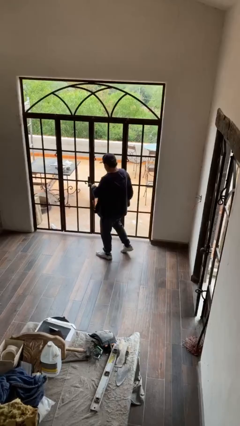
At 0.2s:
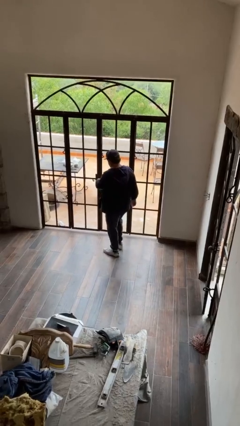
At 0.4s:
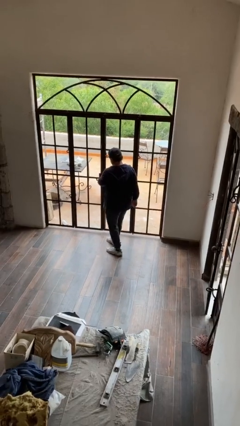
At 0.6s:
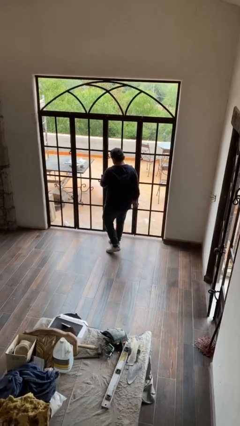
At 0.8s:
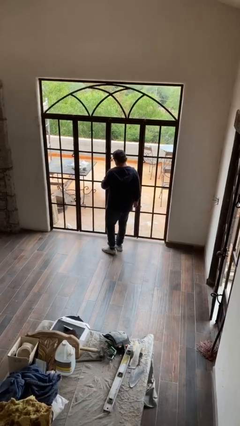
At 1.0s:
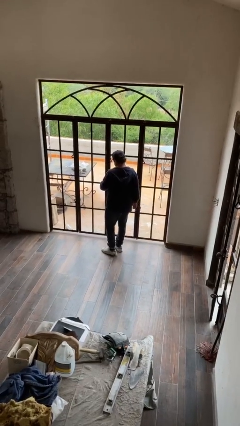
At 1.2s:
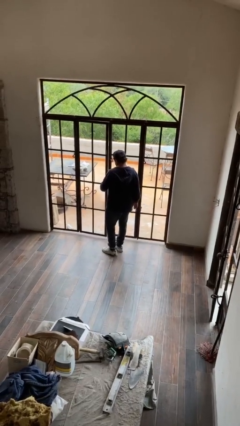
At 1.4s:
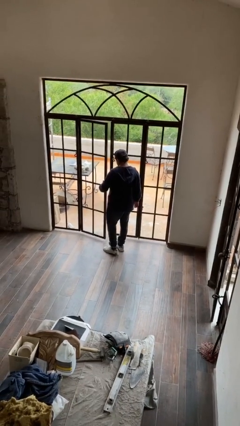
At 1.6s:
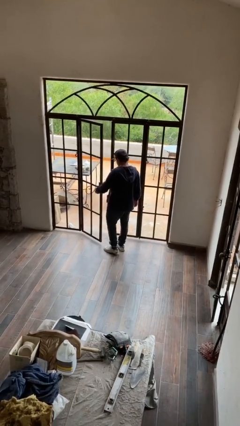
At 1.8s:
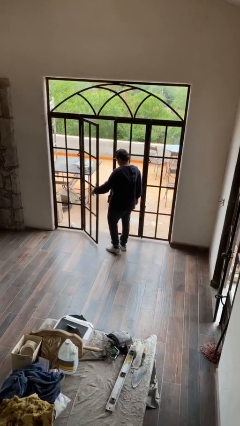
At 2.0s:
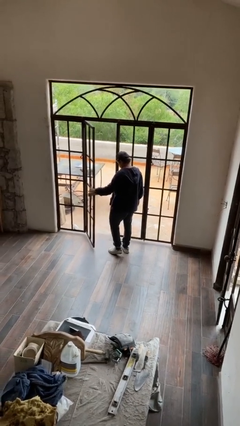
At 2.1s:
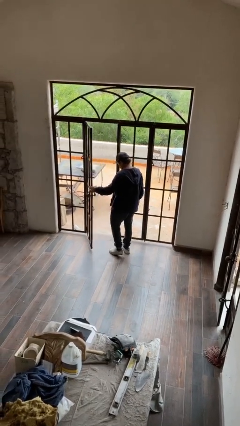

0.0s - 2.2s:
person opens facility door

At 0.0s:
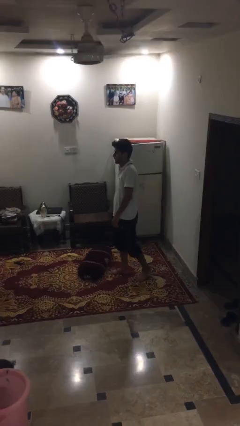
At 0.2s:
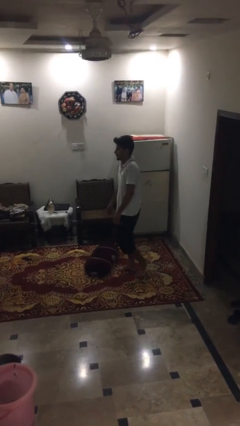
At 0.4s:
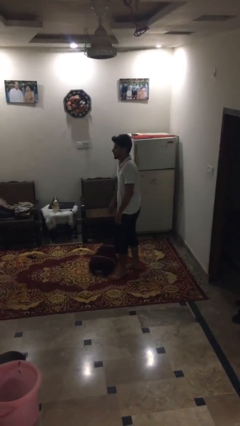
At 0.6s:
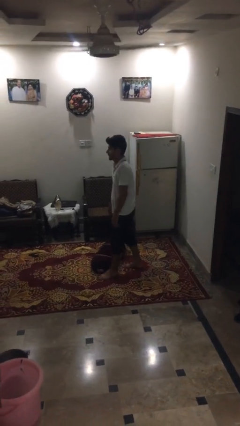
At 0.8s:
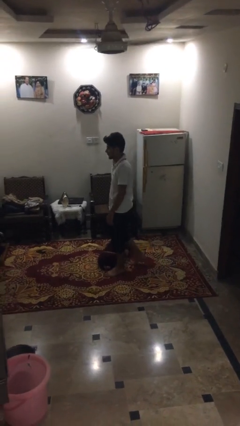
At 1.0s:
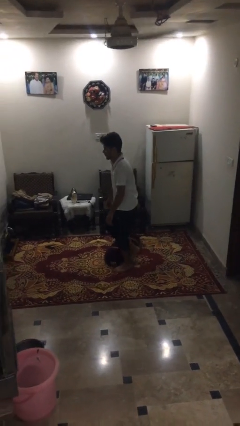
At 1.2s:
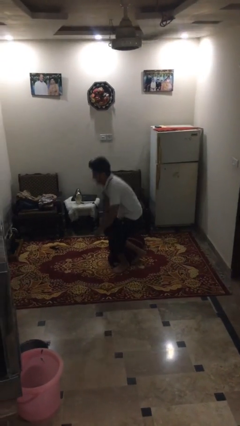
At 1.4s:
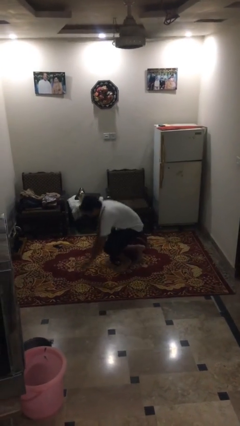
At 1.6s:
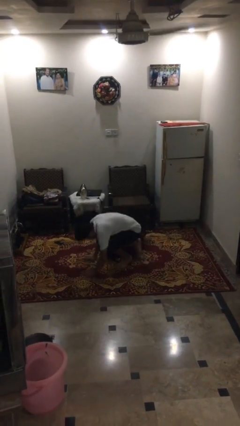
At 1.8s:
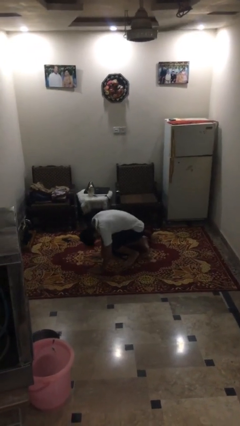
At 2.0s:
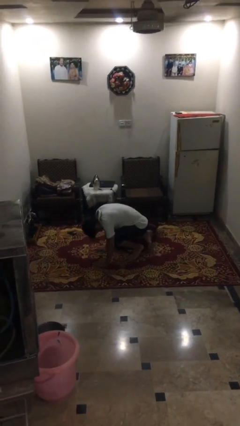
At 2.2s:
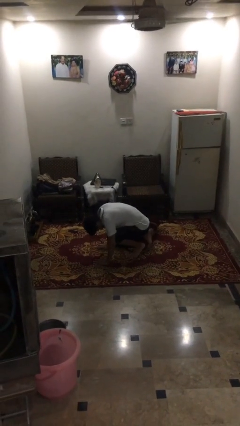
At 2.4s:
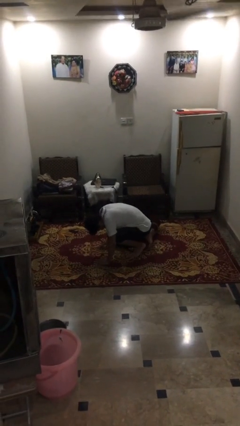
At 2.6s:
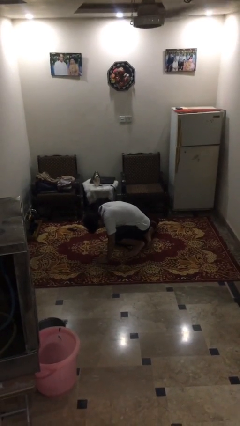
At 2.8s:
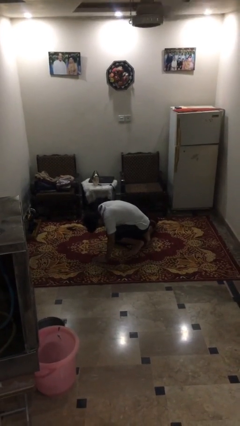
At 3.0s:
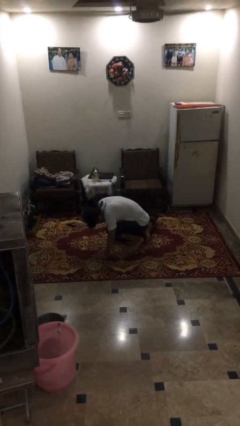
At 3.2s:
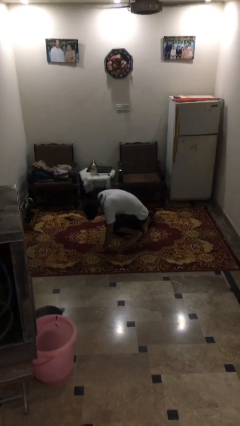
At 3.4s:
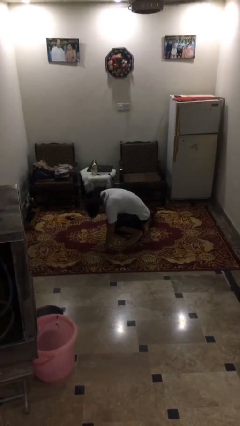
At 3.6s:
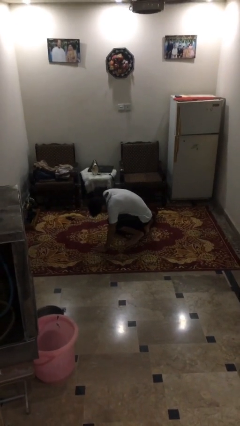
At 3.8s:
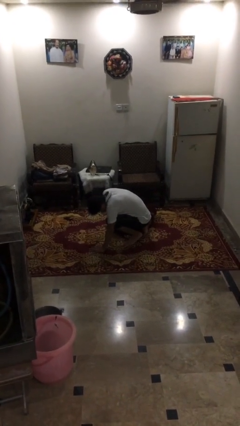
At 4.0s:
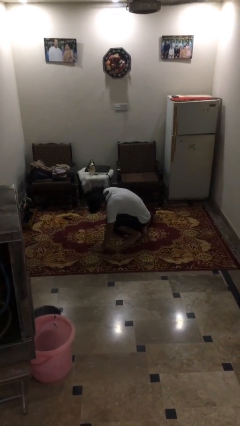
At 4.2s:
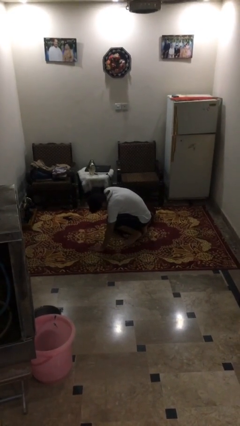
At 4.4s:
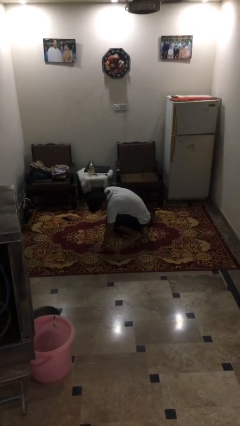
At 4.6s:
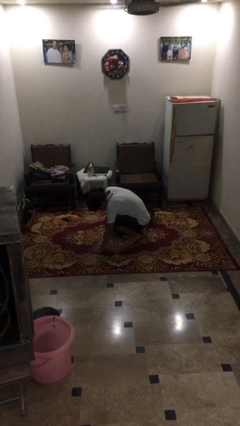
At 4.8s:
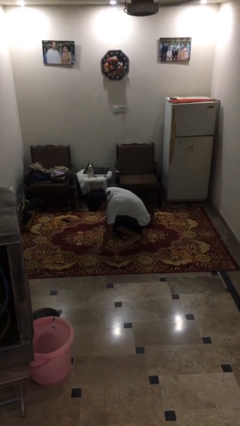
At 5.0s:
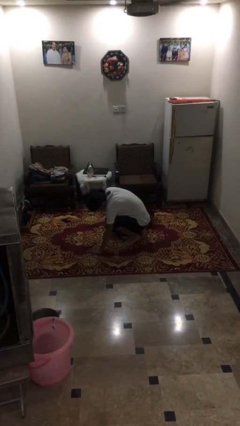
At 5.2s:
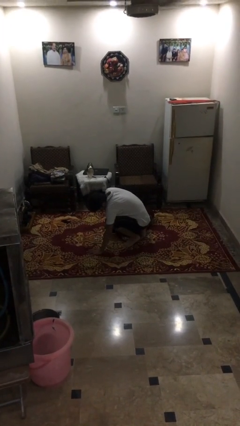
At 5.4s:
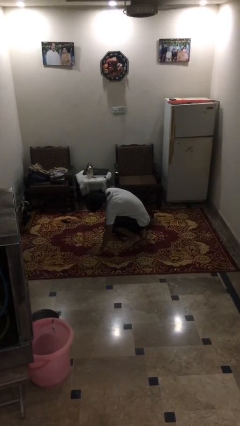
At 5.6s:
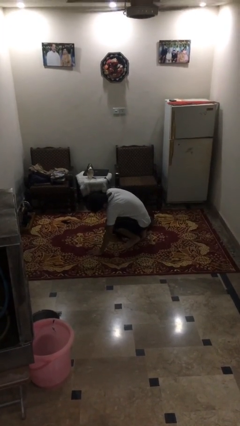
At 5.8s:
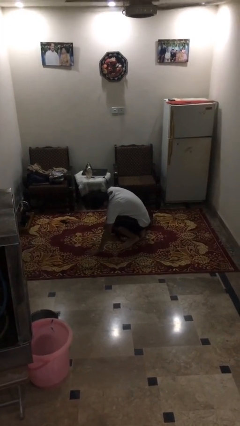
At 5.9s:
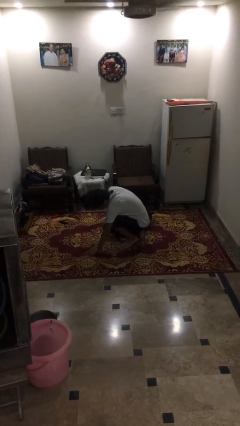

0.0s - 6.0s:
person trips on object on floor

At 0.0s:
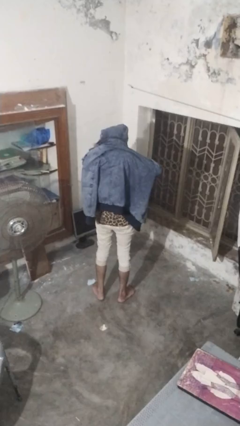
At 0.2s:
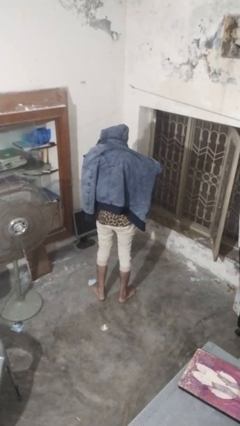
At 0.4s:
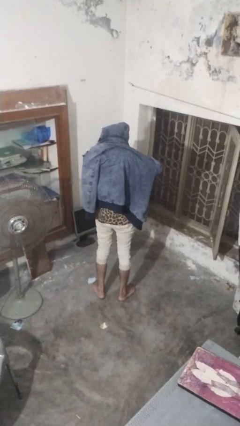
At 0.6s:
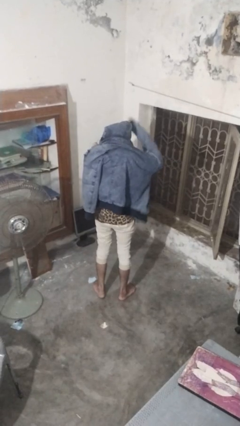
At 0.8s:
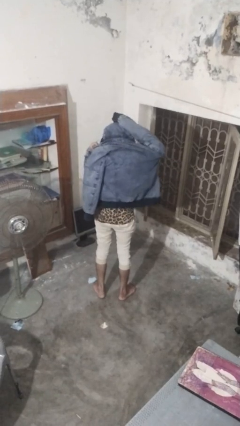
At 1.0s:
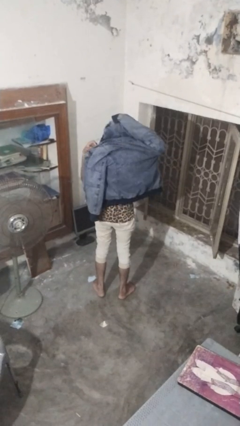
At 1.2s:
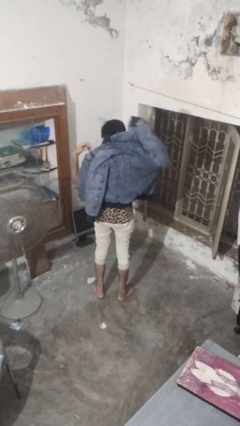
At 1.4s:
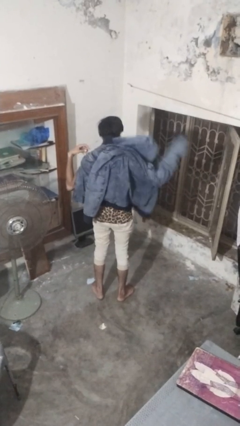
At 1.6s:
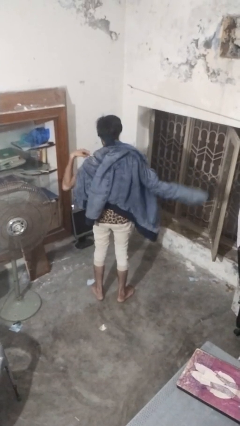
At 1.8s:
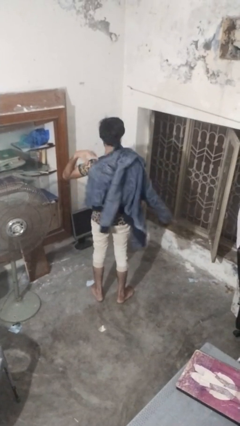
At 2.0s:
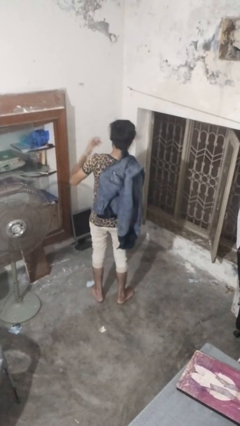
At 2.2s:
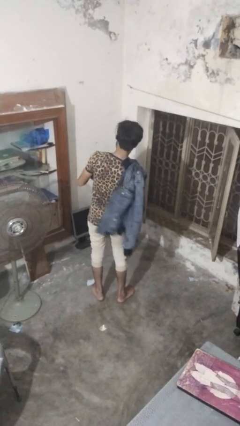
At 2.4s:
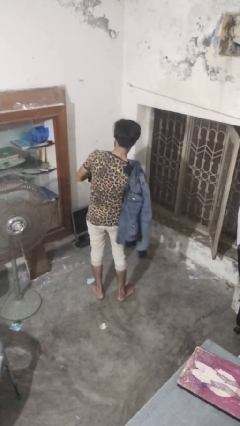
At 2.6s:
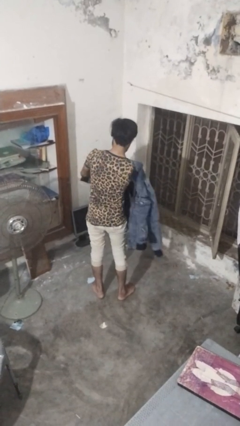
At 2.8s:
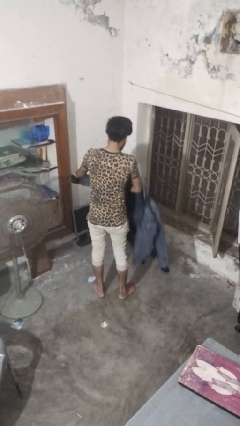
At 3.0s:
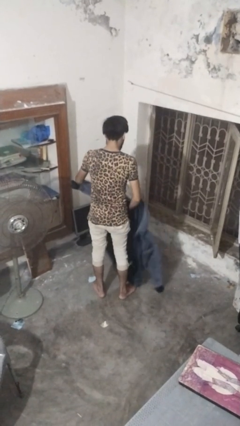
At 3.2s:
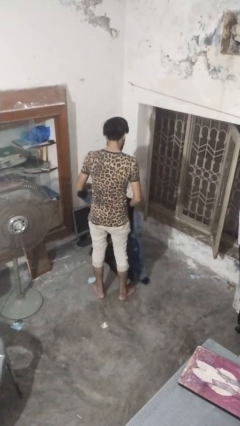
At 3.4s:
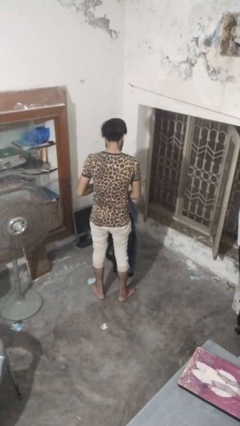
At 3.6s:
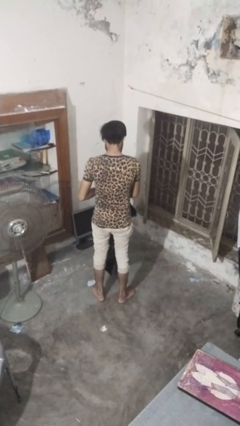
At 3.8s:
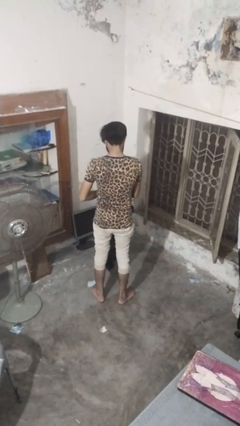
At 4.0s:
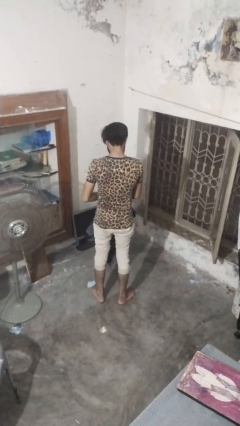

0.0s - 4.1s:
person takes off hoodie

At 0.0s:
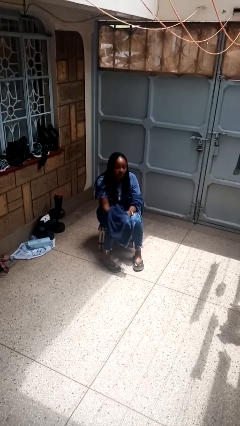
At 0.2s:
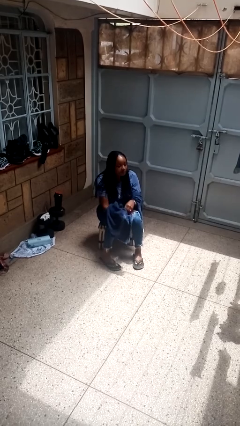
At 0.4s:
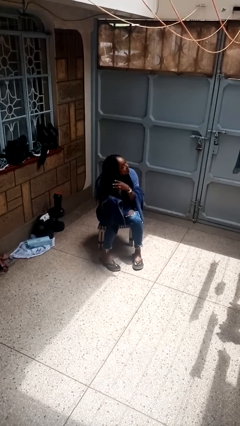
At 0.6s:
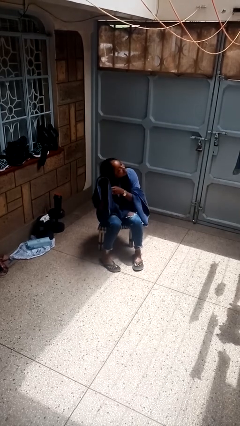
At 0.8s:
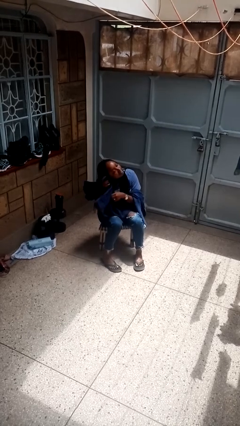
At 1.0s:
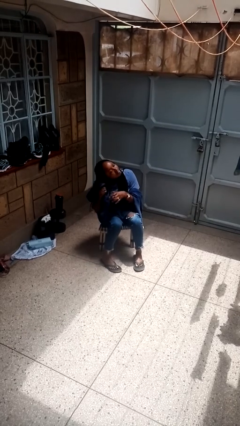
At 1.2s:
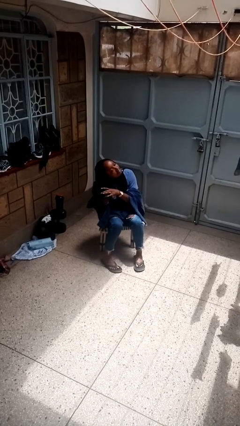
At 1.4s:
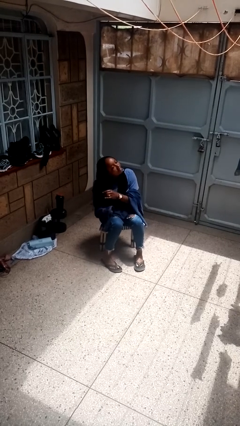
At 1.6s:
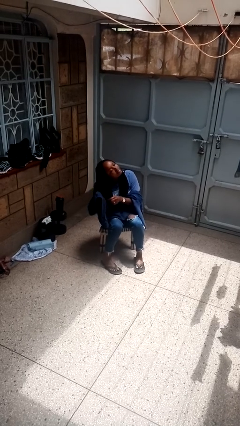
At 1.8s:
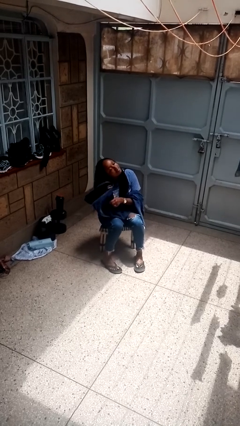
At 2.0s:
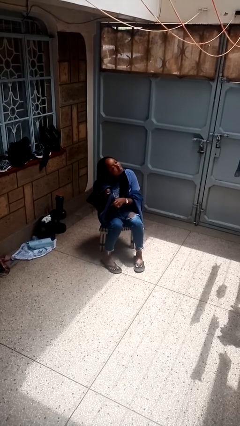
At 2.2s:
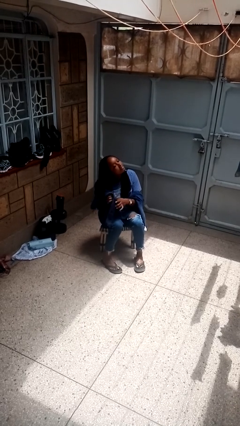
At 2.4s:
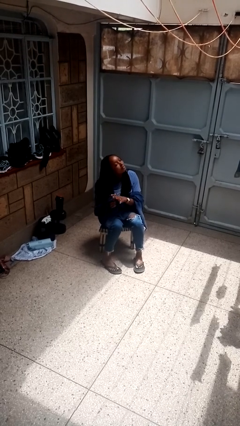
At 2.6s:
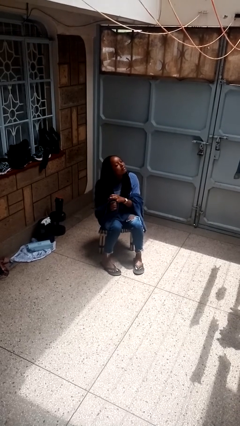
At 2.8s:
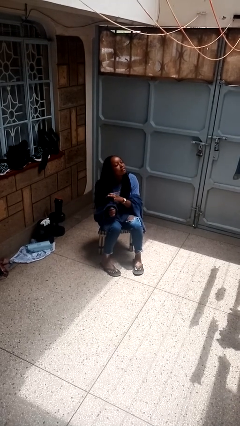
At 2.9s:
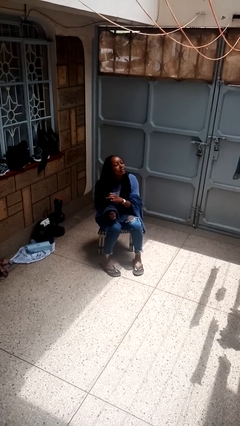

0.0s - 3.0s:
person dries hair with towel

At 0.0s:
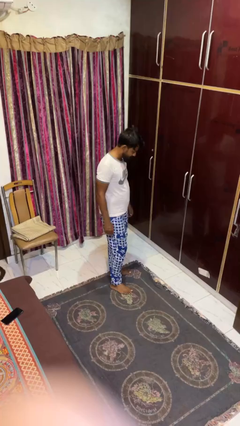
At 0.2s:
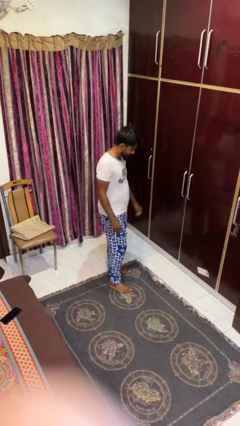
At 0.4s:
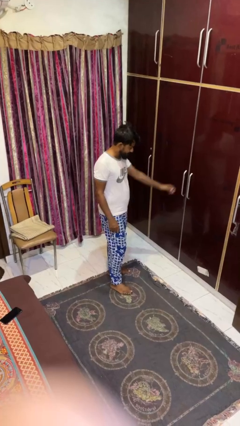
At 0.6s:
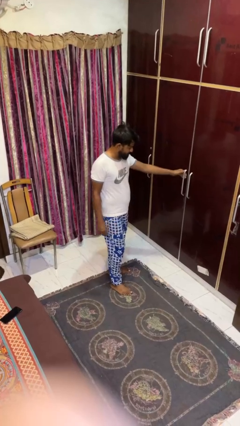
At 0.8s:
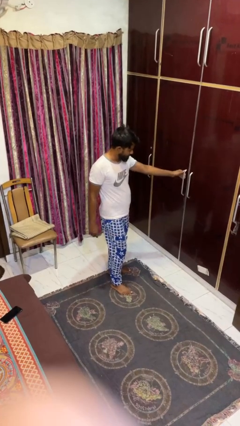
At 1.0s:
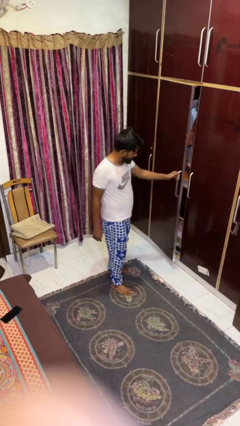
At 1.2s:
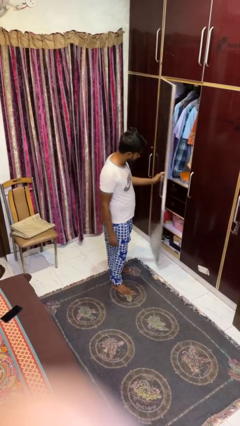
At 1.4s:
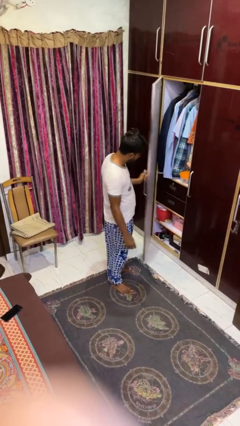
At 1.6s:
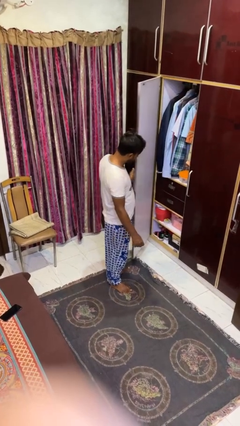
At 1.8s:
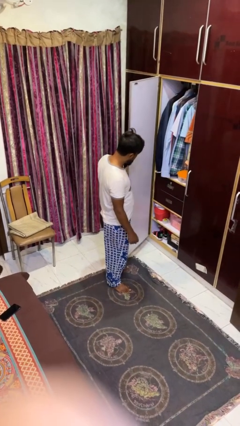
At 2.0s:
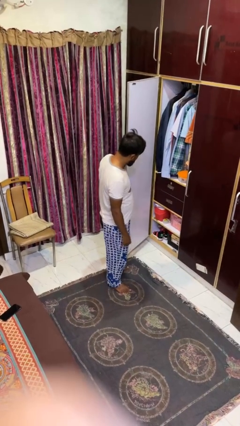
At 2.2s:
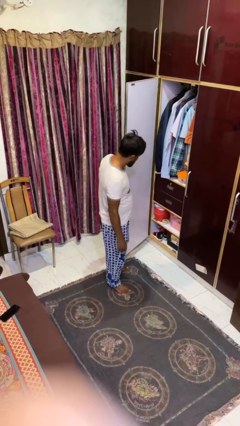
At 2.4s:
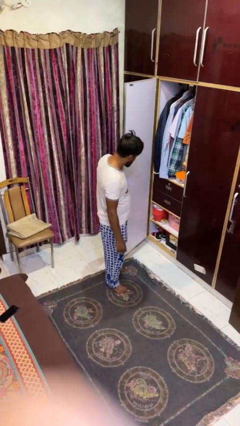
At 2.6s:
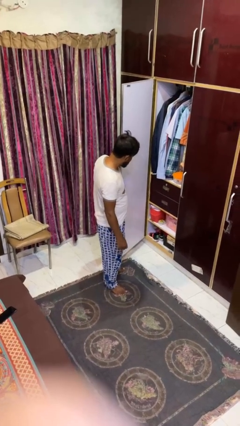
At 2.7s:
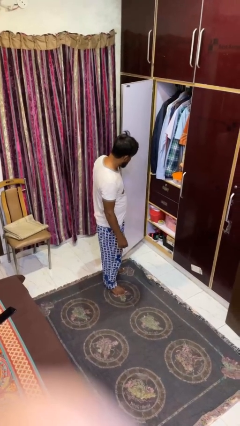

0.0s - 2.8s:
person opens closet door
